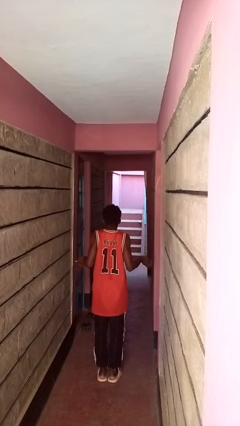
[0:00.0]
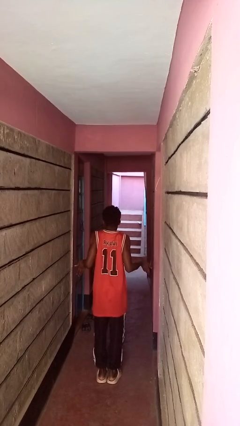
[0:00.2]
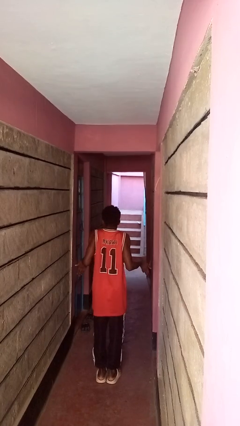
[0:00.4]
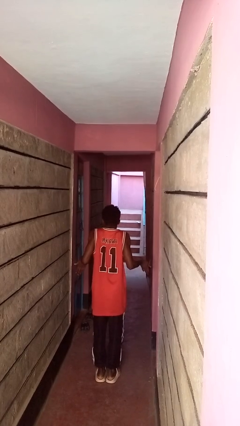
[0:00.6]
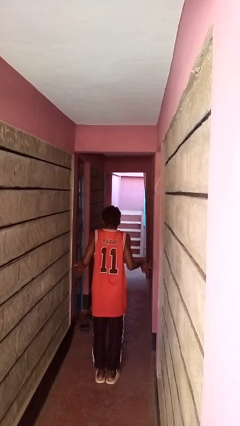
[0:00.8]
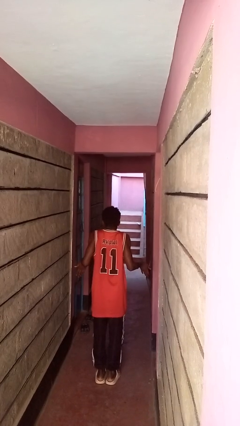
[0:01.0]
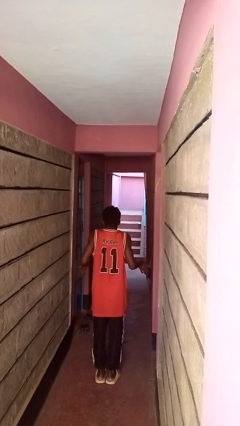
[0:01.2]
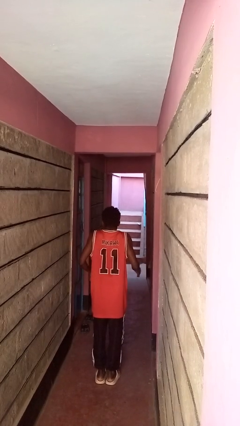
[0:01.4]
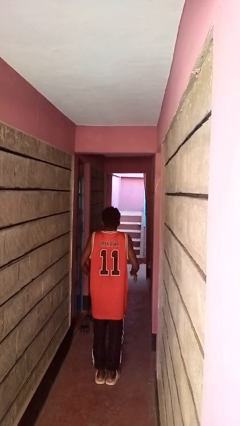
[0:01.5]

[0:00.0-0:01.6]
person shrugs

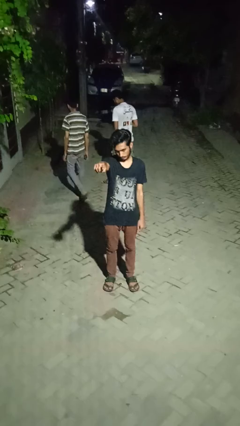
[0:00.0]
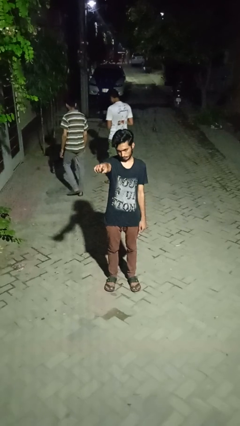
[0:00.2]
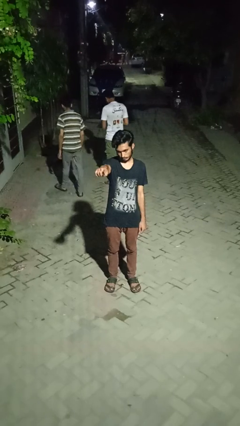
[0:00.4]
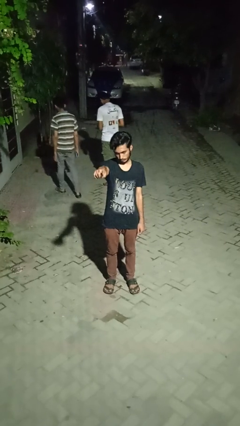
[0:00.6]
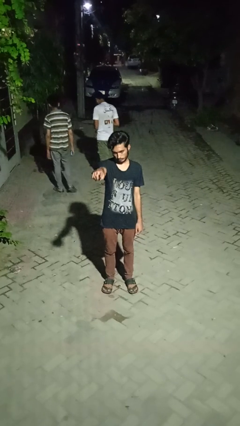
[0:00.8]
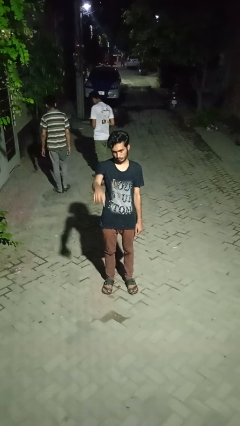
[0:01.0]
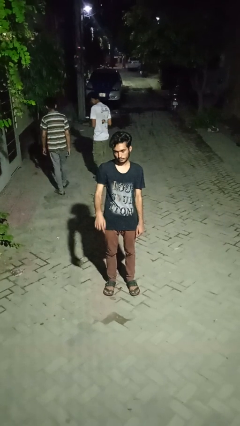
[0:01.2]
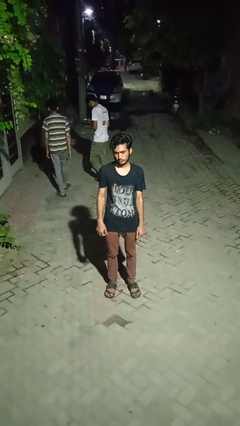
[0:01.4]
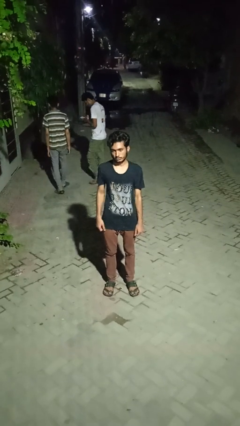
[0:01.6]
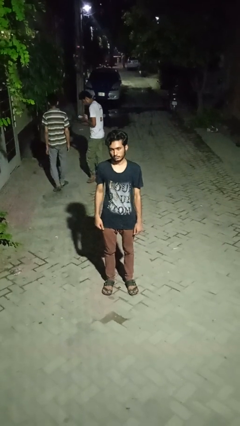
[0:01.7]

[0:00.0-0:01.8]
person points at person

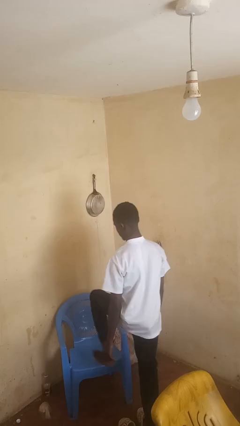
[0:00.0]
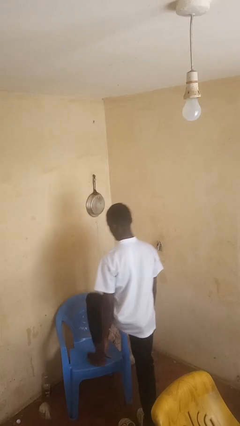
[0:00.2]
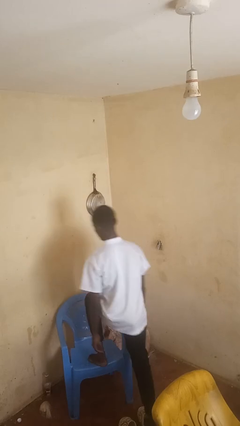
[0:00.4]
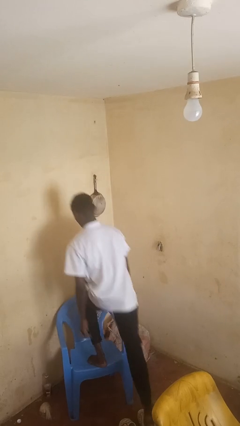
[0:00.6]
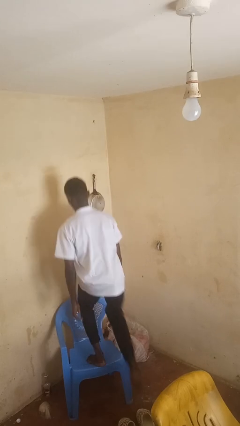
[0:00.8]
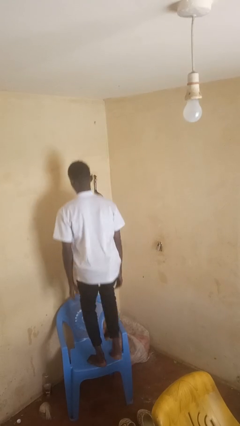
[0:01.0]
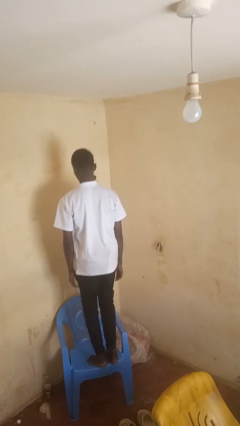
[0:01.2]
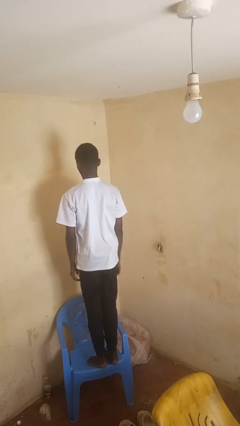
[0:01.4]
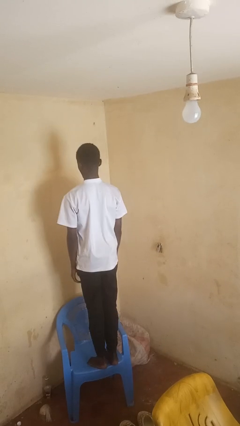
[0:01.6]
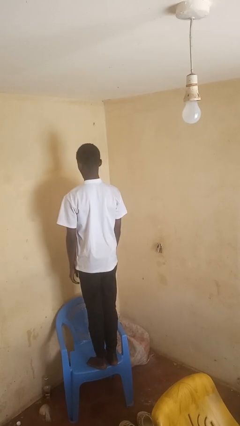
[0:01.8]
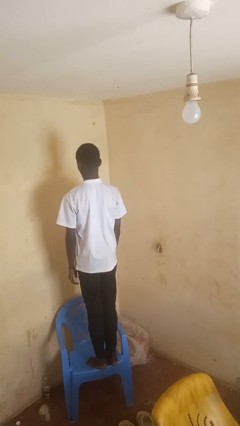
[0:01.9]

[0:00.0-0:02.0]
person climbs on chair

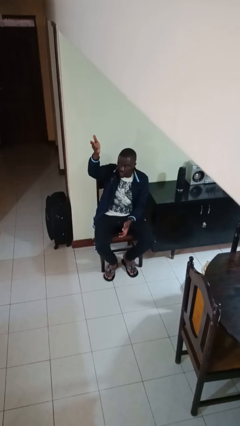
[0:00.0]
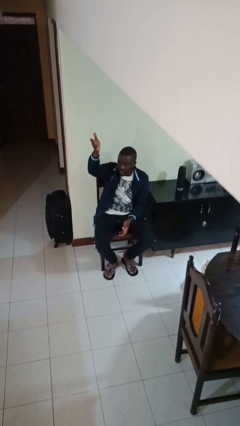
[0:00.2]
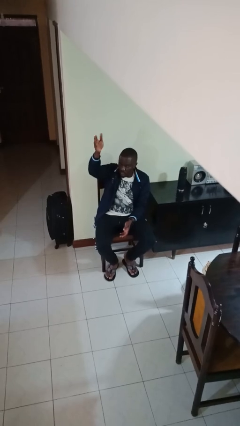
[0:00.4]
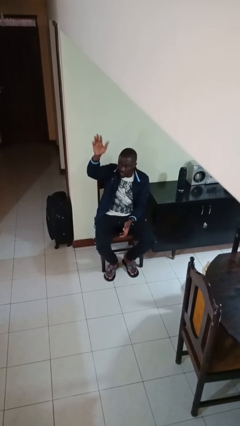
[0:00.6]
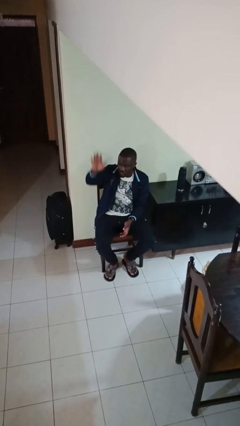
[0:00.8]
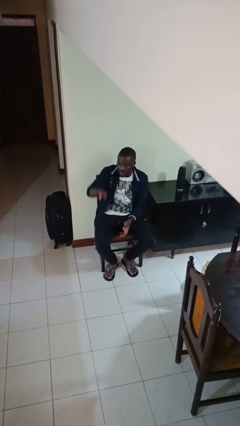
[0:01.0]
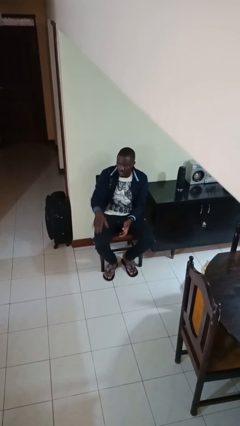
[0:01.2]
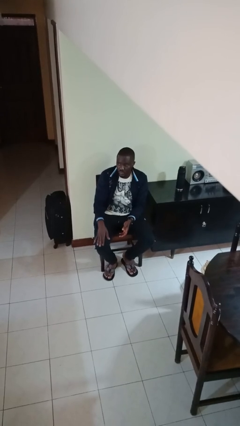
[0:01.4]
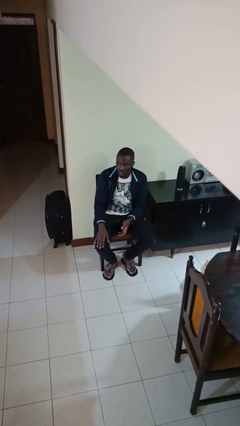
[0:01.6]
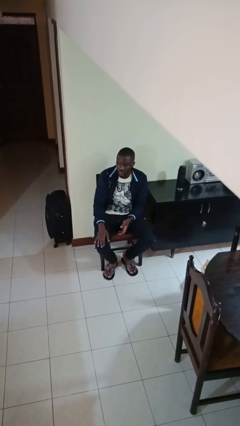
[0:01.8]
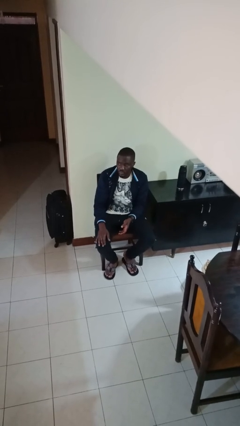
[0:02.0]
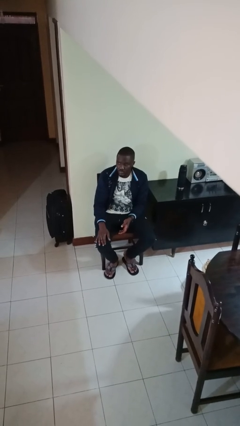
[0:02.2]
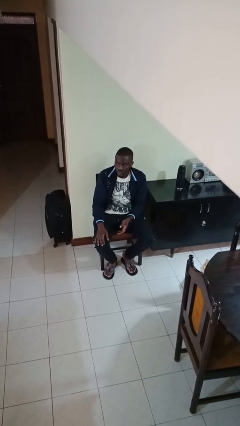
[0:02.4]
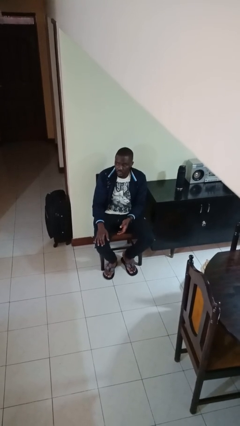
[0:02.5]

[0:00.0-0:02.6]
person gestures swipe down

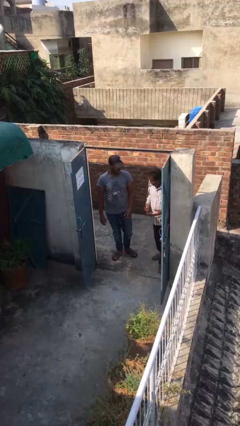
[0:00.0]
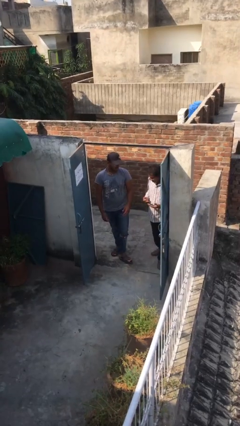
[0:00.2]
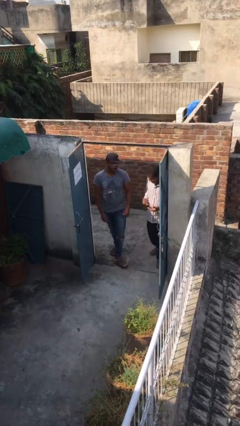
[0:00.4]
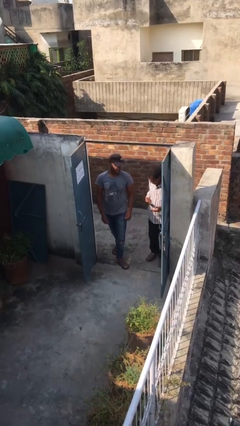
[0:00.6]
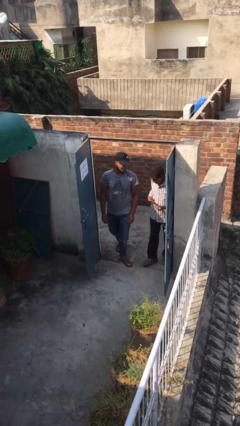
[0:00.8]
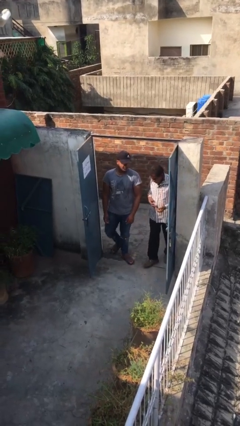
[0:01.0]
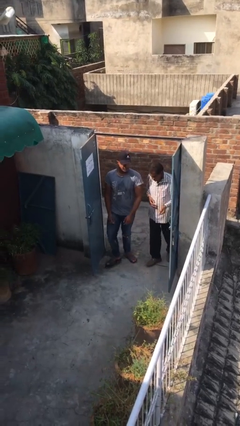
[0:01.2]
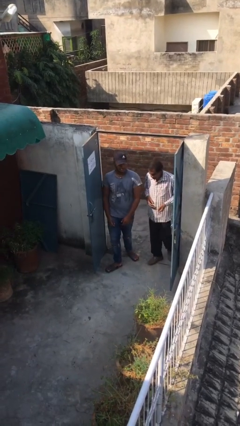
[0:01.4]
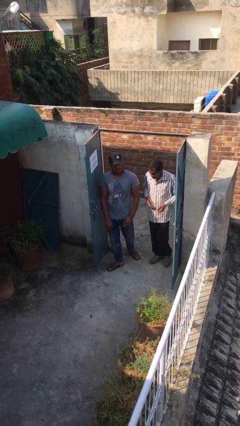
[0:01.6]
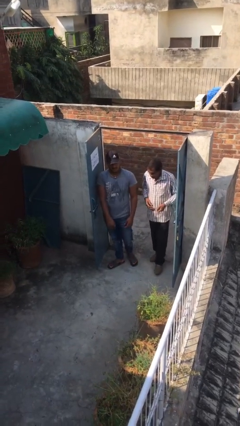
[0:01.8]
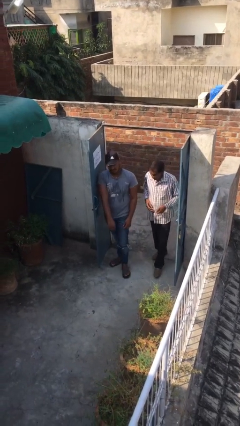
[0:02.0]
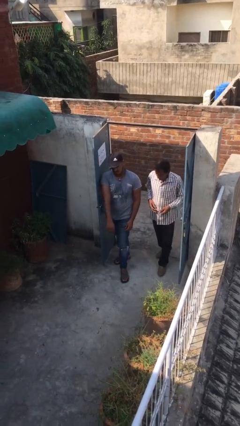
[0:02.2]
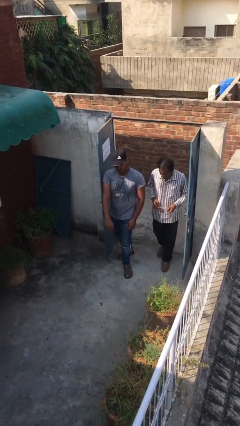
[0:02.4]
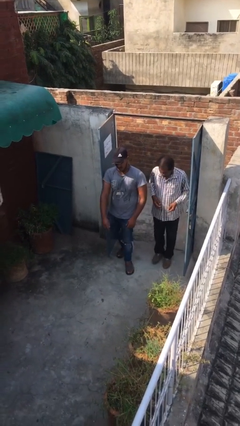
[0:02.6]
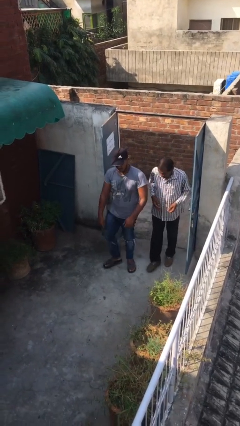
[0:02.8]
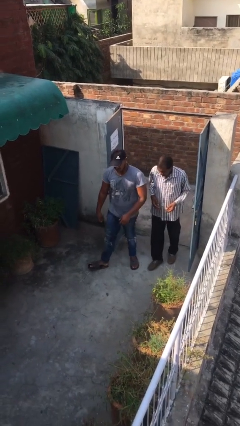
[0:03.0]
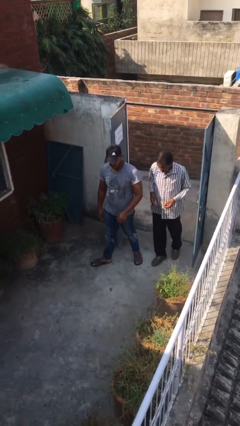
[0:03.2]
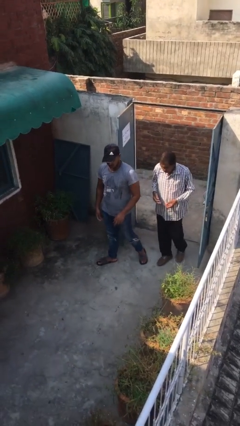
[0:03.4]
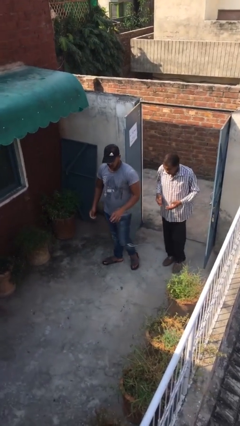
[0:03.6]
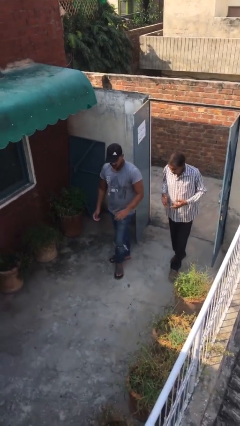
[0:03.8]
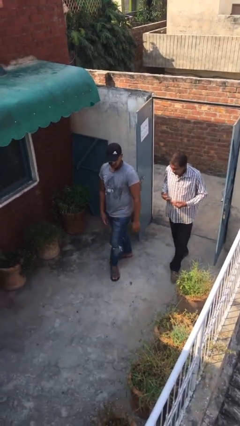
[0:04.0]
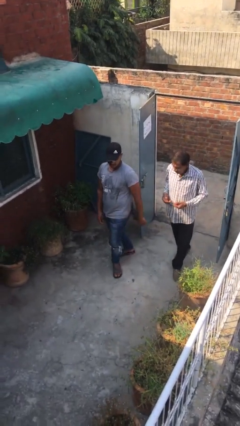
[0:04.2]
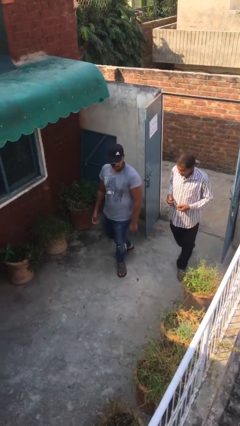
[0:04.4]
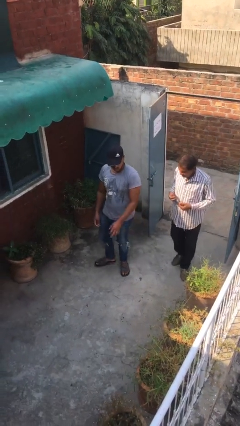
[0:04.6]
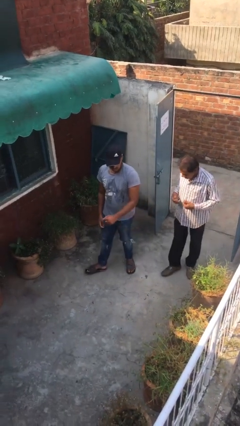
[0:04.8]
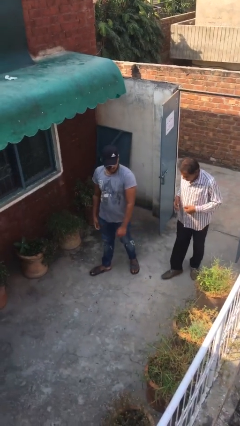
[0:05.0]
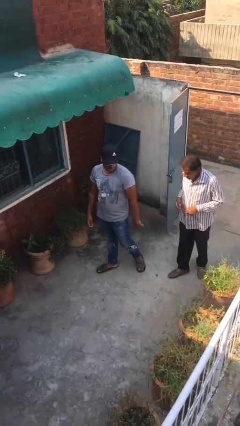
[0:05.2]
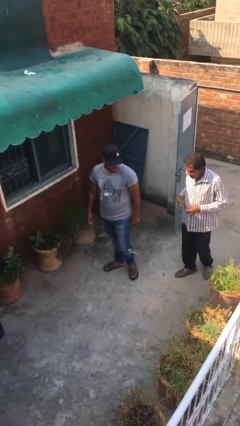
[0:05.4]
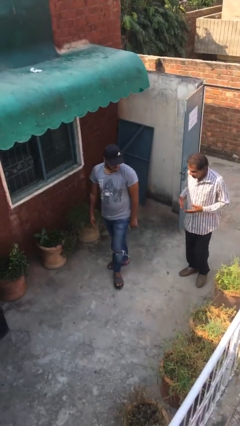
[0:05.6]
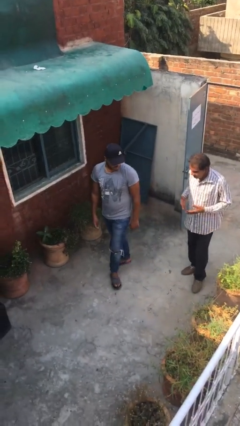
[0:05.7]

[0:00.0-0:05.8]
person talks to person

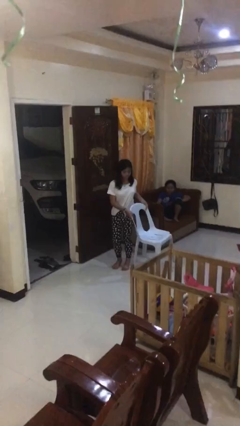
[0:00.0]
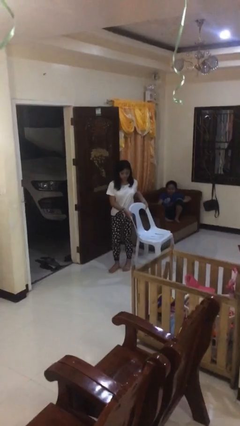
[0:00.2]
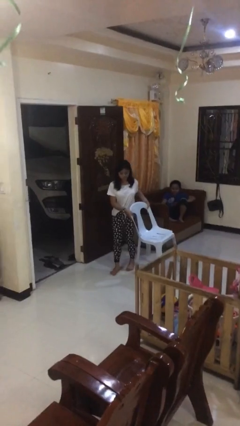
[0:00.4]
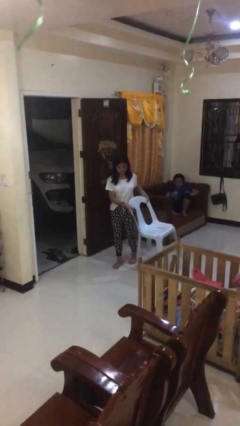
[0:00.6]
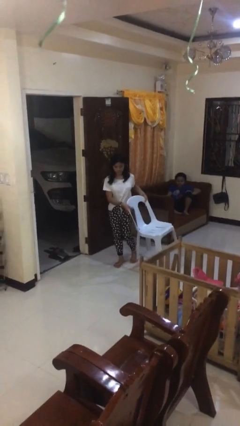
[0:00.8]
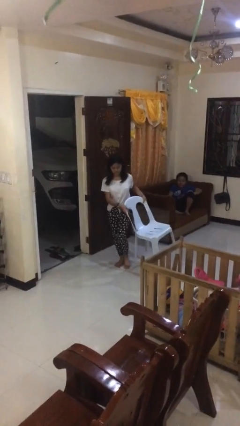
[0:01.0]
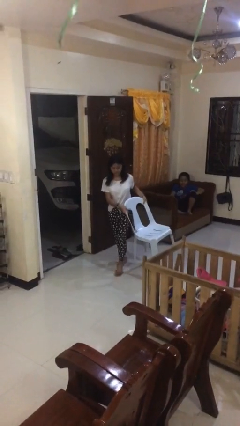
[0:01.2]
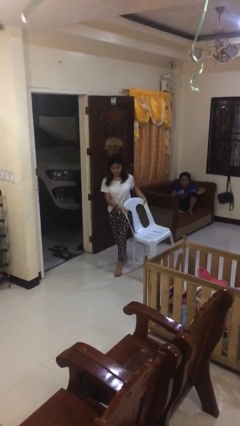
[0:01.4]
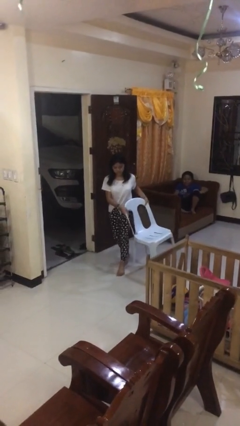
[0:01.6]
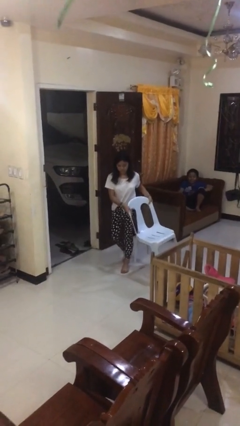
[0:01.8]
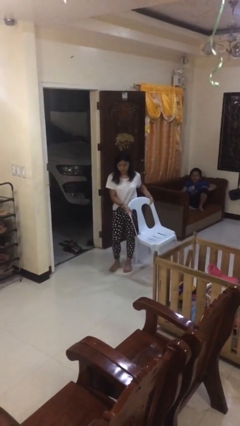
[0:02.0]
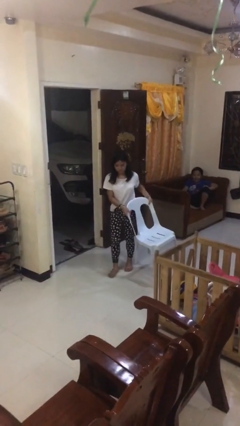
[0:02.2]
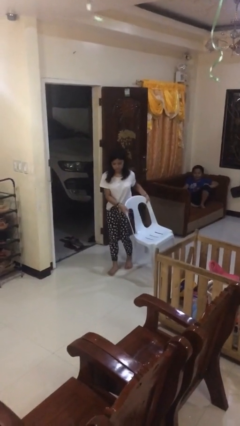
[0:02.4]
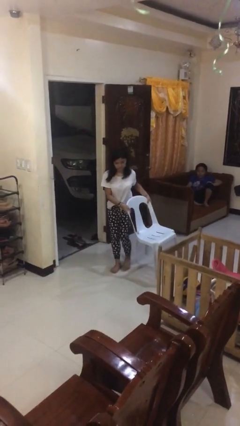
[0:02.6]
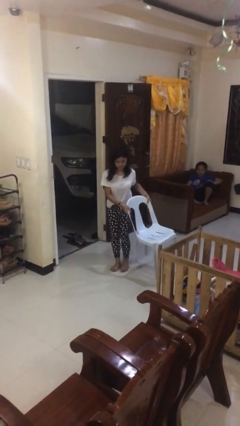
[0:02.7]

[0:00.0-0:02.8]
person carries heavy object

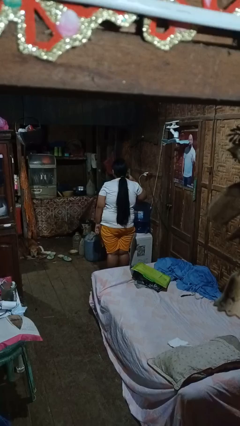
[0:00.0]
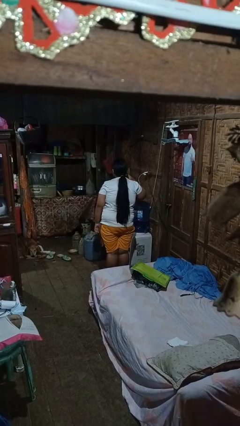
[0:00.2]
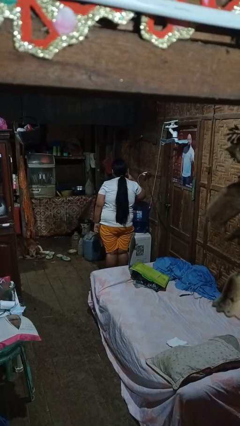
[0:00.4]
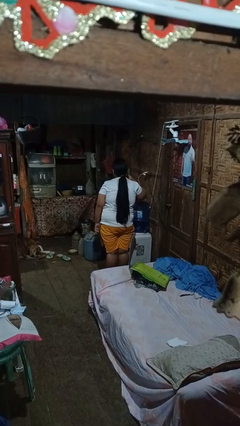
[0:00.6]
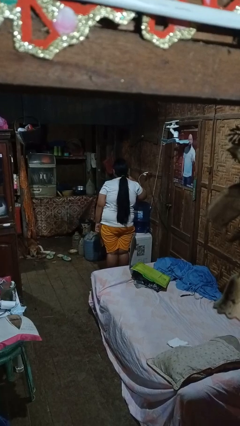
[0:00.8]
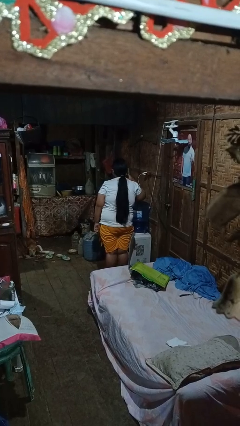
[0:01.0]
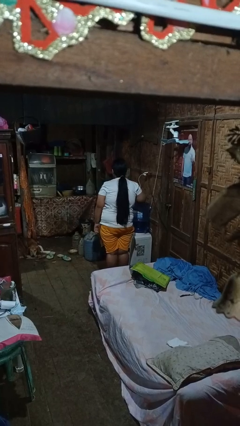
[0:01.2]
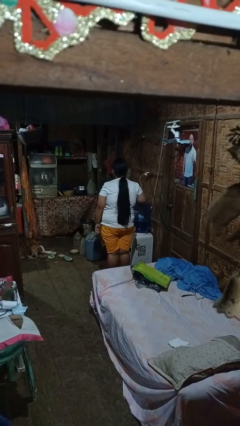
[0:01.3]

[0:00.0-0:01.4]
person gestures listen closely
